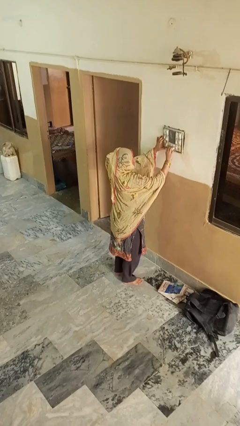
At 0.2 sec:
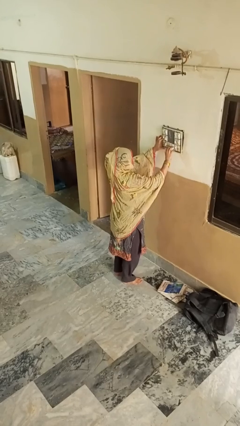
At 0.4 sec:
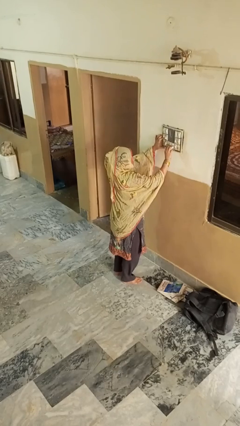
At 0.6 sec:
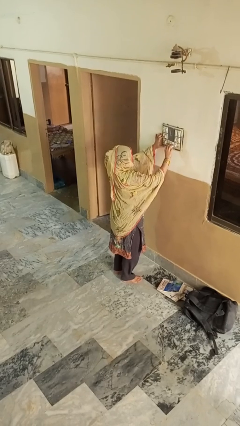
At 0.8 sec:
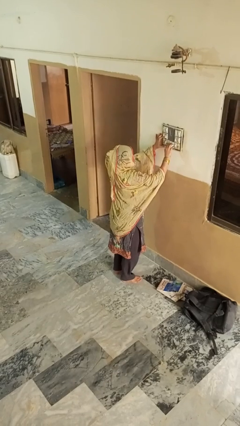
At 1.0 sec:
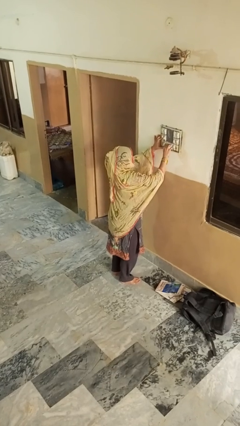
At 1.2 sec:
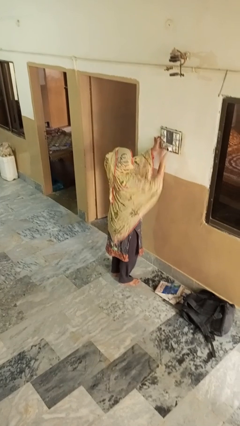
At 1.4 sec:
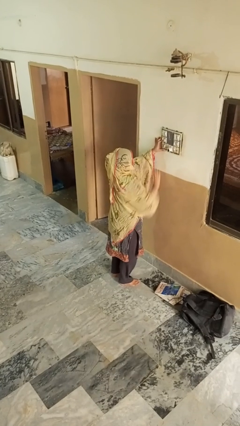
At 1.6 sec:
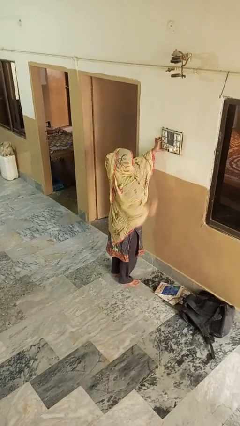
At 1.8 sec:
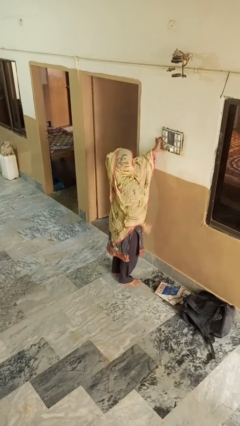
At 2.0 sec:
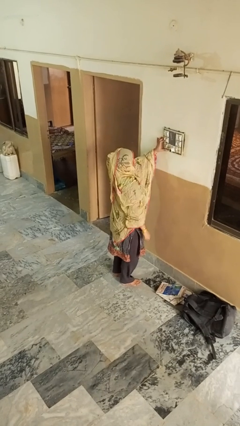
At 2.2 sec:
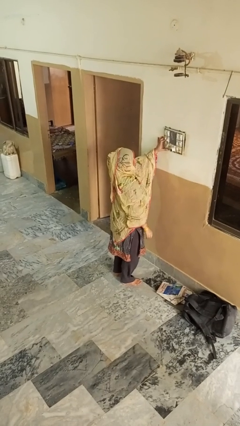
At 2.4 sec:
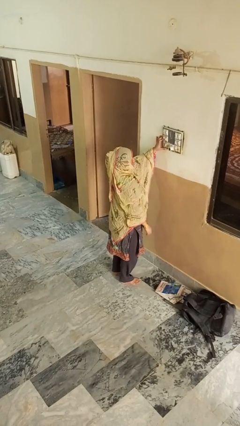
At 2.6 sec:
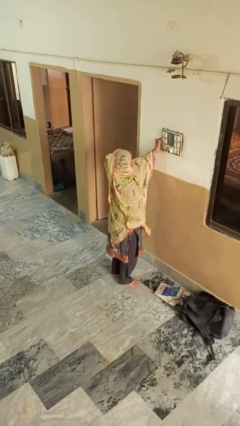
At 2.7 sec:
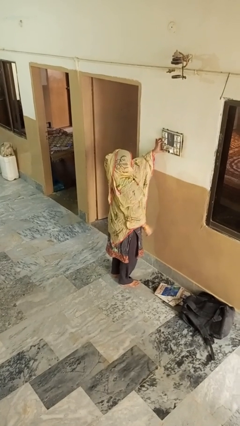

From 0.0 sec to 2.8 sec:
person plugs into electrical socket

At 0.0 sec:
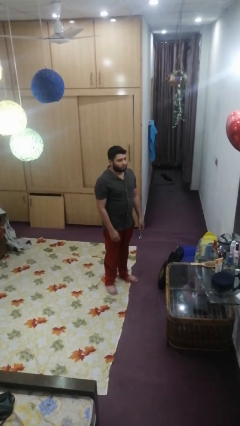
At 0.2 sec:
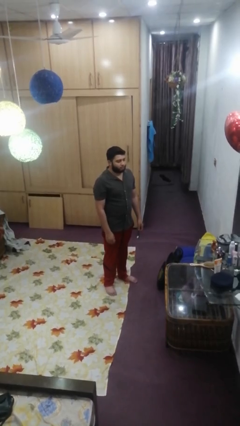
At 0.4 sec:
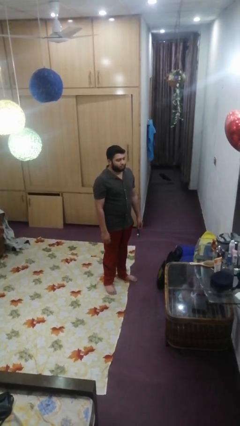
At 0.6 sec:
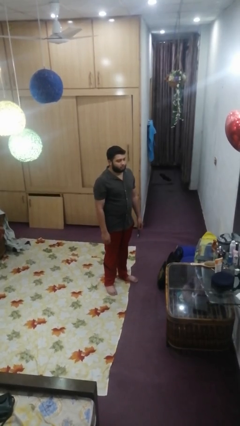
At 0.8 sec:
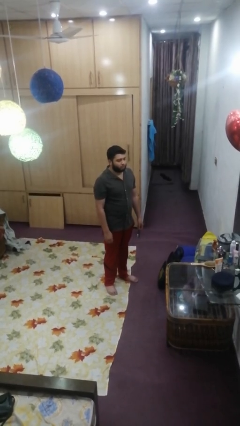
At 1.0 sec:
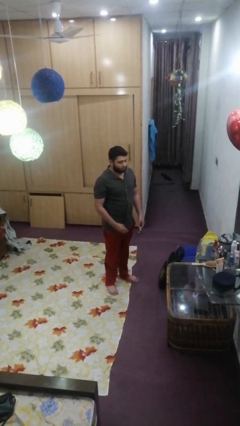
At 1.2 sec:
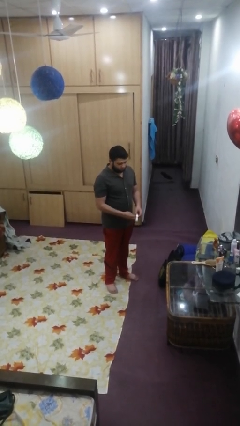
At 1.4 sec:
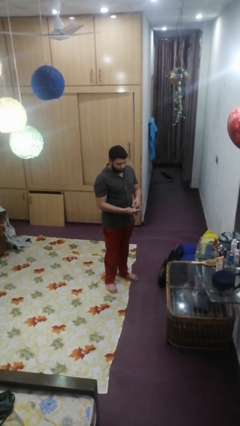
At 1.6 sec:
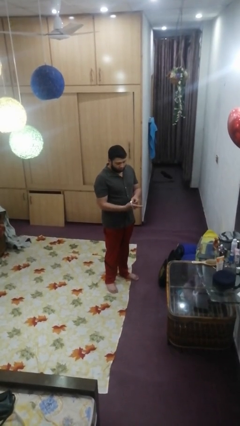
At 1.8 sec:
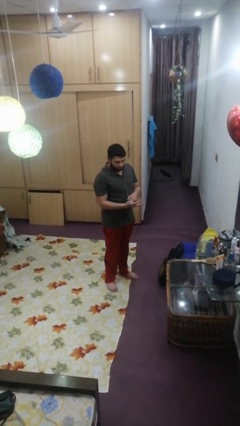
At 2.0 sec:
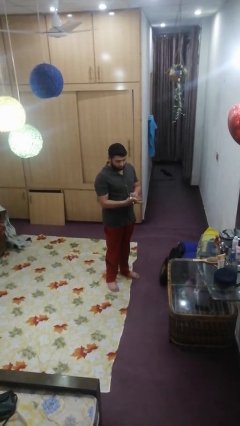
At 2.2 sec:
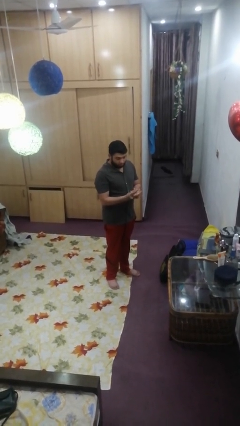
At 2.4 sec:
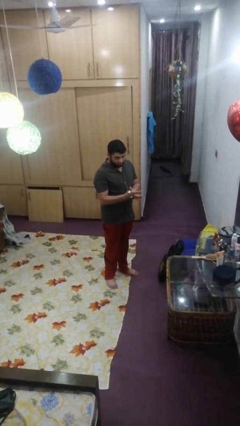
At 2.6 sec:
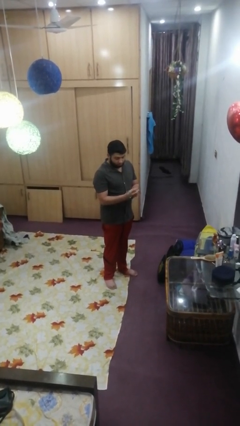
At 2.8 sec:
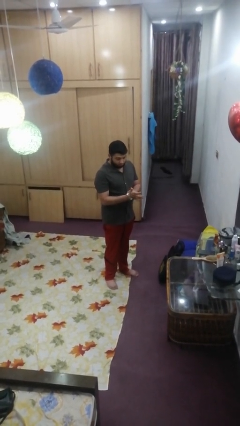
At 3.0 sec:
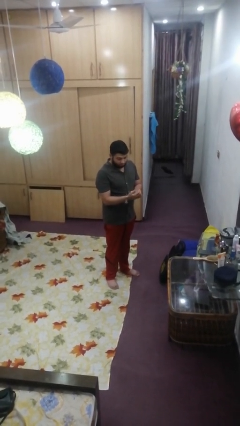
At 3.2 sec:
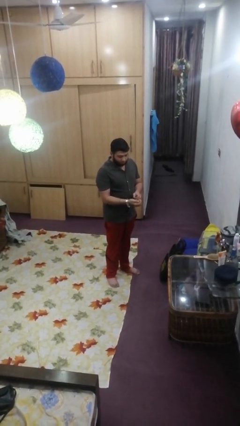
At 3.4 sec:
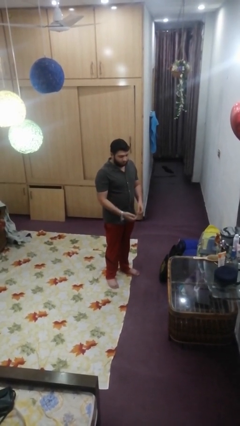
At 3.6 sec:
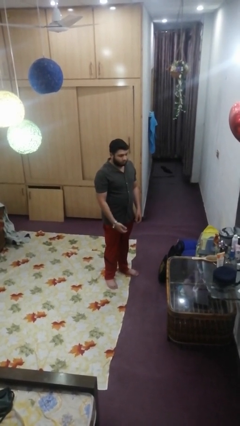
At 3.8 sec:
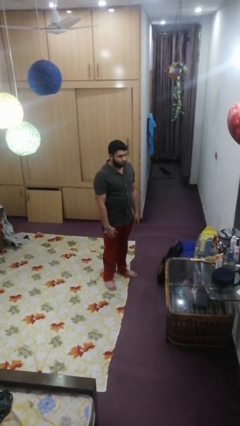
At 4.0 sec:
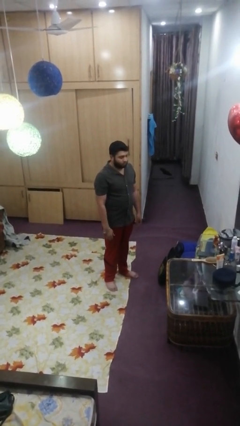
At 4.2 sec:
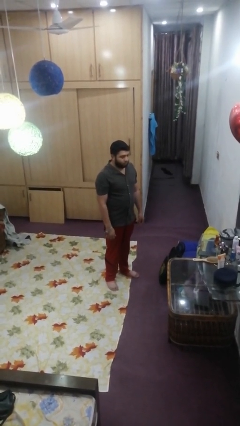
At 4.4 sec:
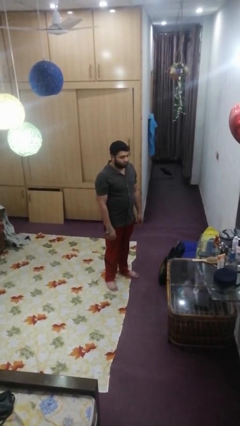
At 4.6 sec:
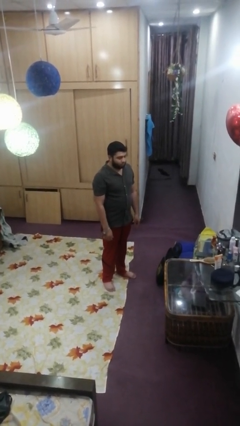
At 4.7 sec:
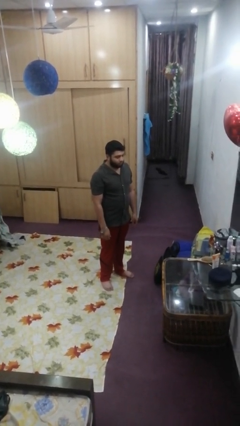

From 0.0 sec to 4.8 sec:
person puts on wristwatch

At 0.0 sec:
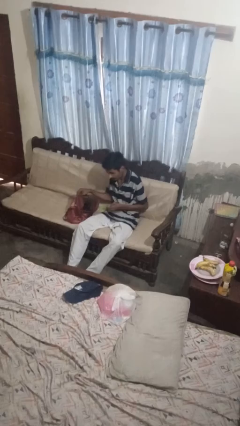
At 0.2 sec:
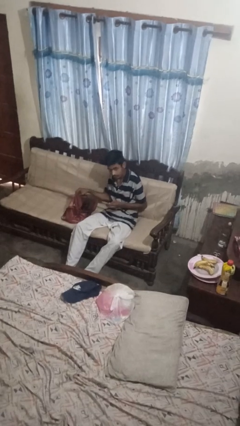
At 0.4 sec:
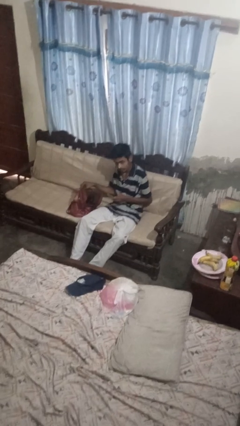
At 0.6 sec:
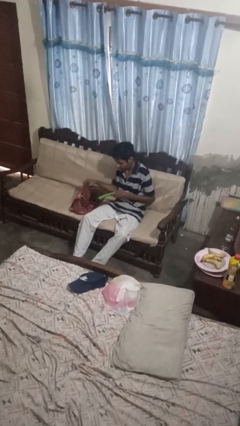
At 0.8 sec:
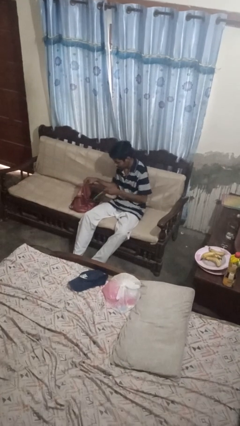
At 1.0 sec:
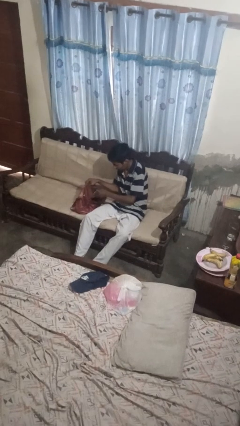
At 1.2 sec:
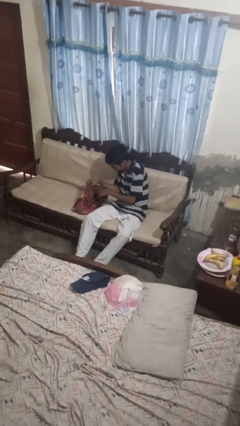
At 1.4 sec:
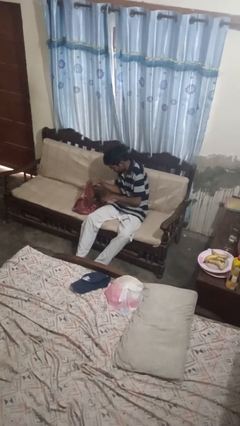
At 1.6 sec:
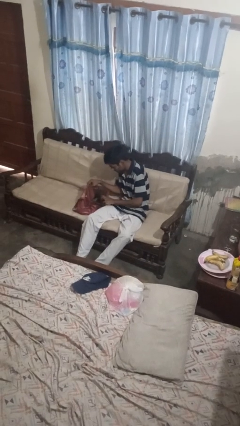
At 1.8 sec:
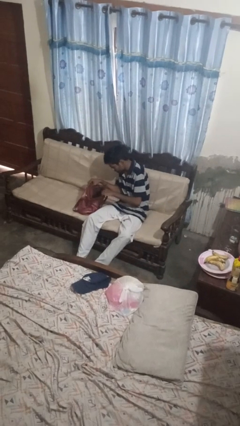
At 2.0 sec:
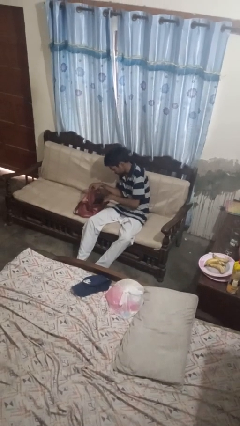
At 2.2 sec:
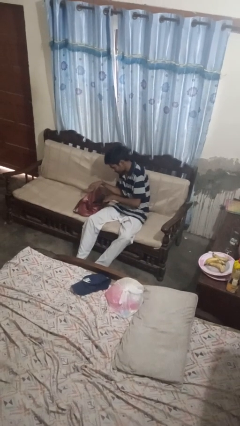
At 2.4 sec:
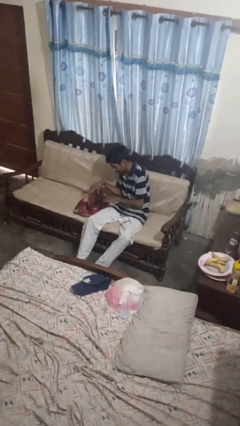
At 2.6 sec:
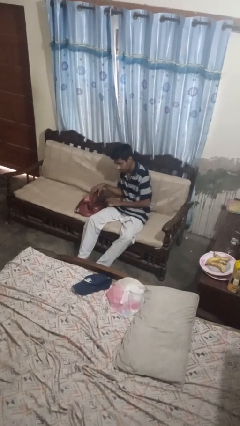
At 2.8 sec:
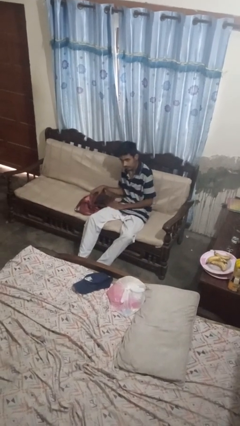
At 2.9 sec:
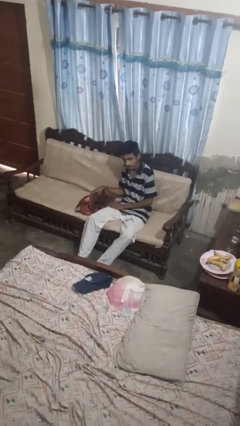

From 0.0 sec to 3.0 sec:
person puts object into purse

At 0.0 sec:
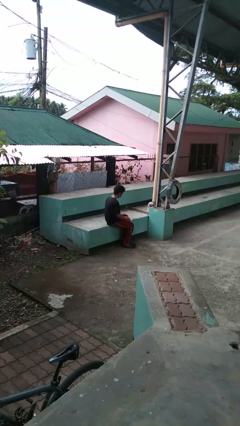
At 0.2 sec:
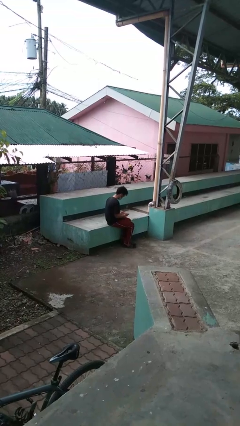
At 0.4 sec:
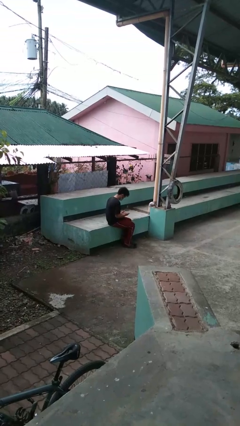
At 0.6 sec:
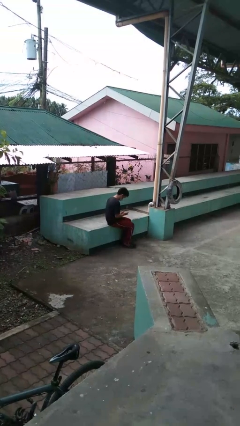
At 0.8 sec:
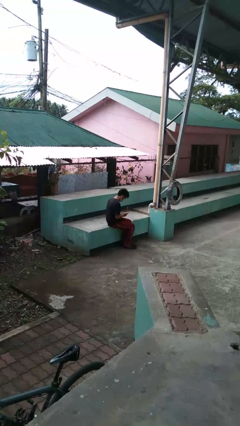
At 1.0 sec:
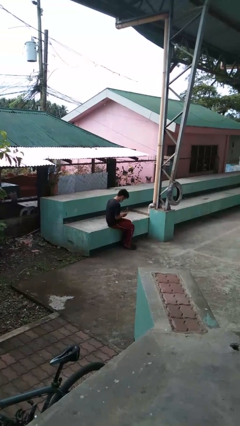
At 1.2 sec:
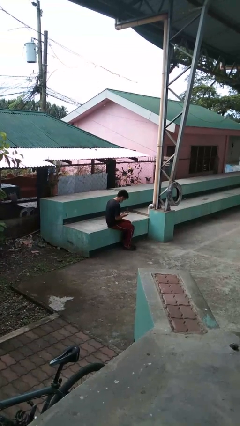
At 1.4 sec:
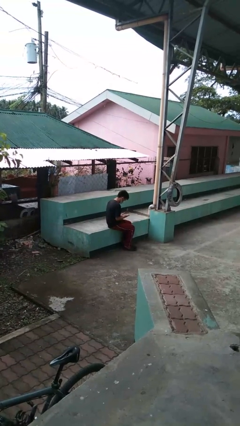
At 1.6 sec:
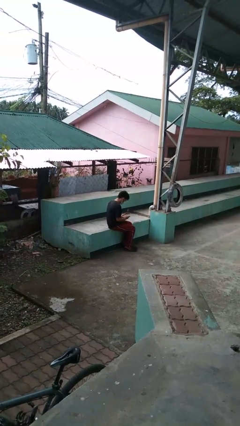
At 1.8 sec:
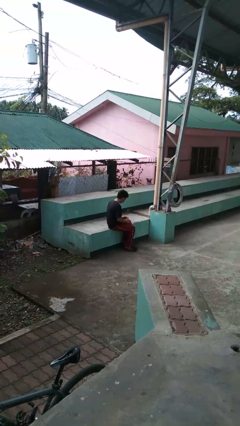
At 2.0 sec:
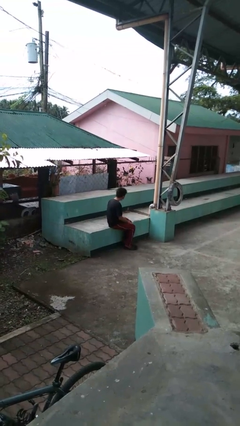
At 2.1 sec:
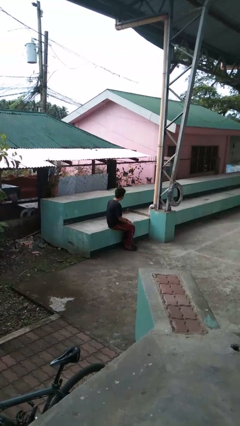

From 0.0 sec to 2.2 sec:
person looks at hands in lap

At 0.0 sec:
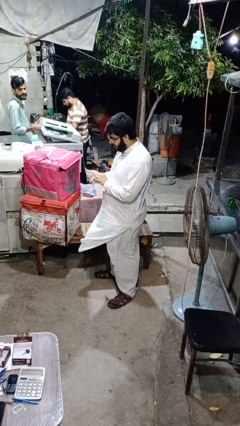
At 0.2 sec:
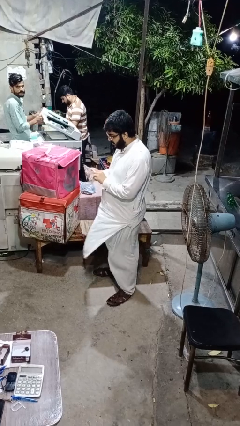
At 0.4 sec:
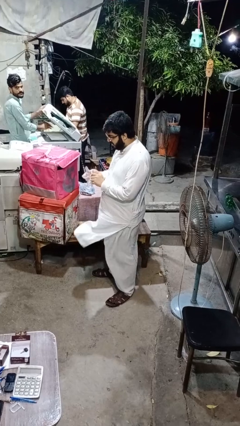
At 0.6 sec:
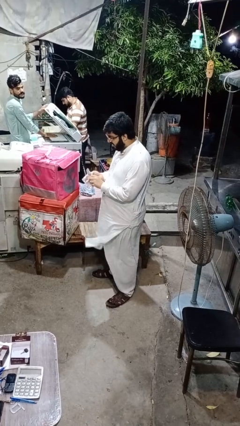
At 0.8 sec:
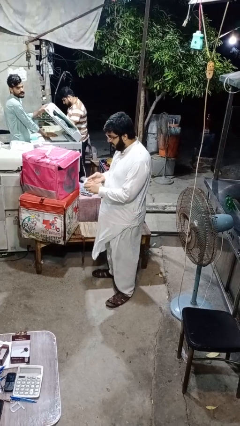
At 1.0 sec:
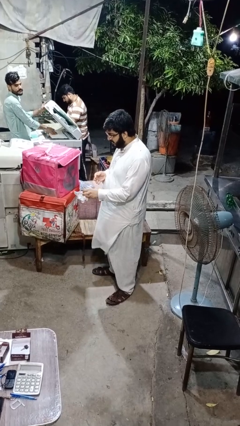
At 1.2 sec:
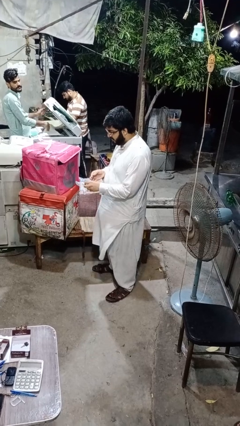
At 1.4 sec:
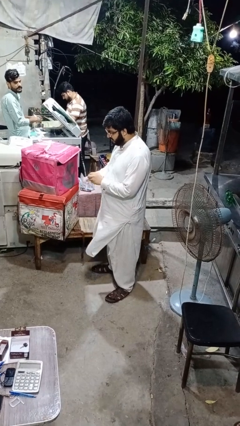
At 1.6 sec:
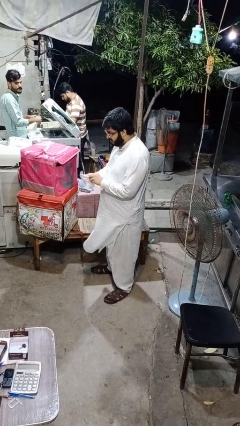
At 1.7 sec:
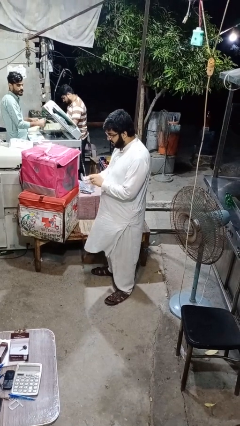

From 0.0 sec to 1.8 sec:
person takes off gloves

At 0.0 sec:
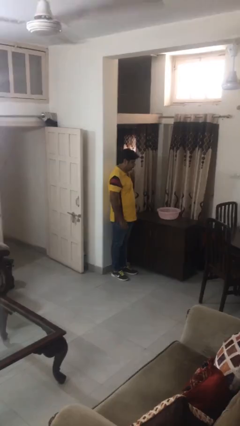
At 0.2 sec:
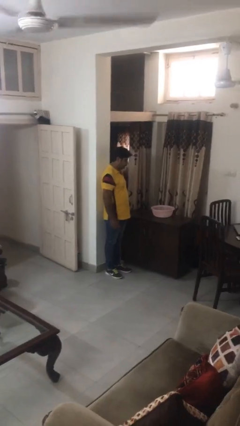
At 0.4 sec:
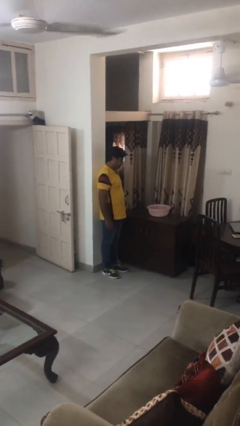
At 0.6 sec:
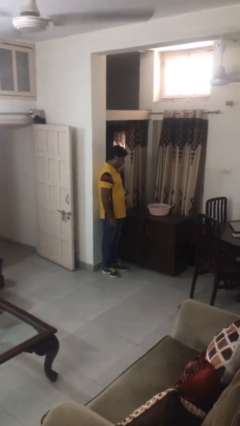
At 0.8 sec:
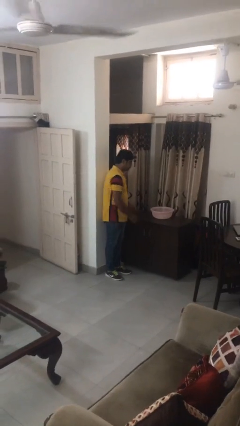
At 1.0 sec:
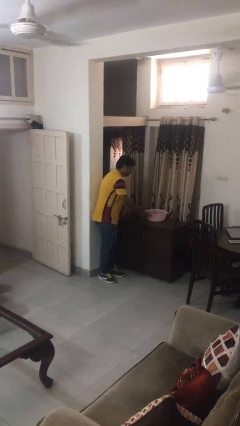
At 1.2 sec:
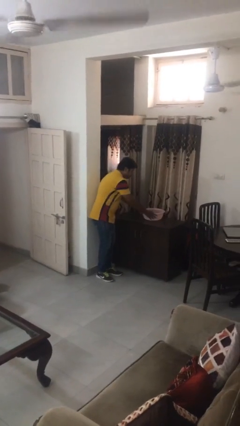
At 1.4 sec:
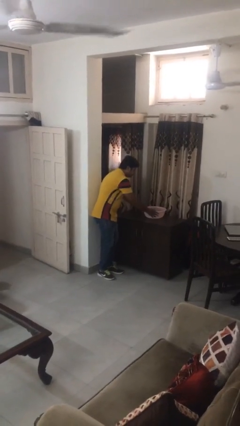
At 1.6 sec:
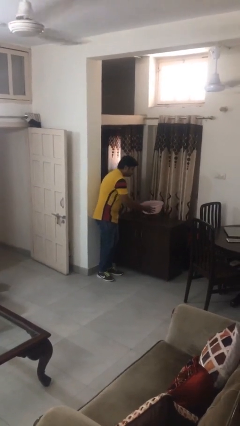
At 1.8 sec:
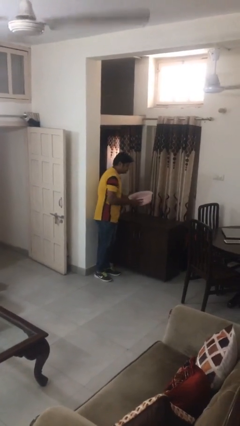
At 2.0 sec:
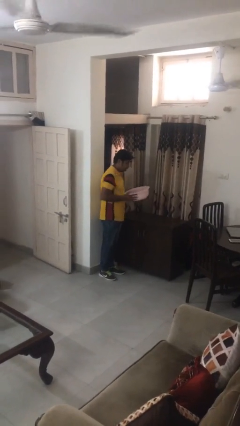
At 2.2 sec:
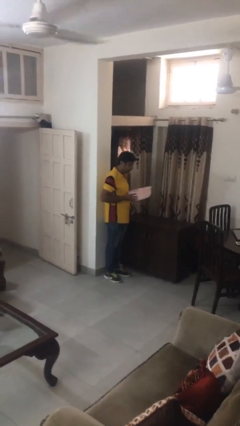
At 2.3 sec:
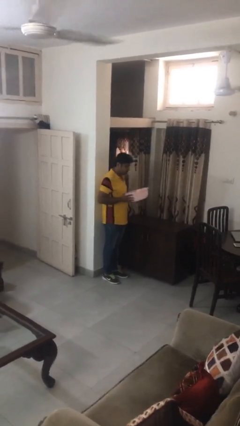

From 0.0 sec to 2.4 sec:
person picks up object from countertop

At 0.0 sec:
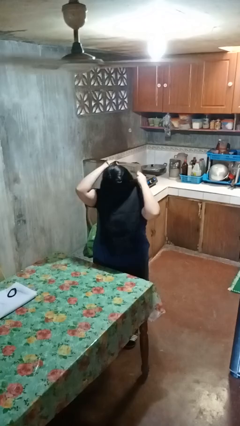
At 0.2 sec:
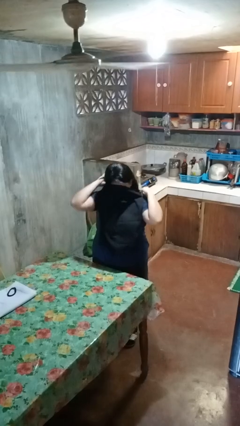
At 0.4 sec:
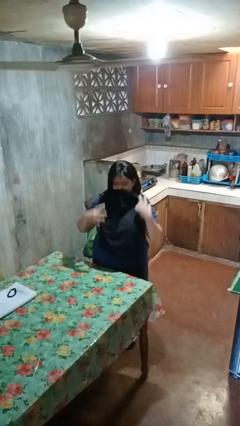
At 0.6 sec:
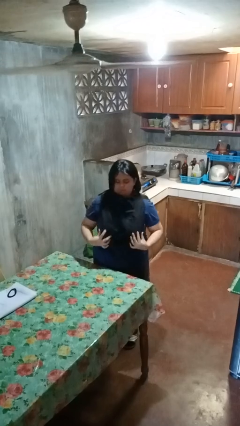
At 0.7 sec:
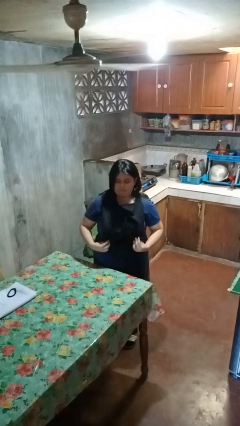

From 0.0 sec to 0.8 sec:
person puts on apron
